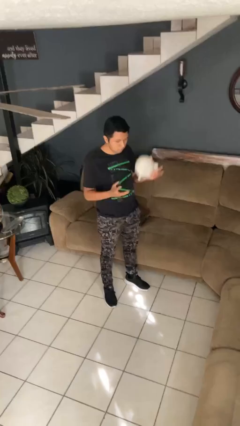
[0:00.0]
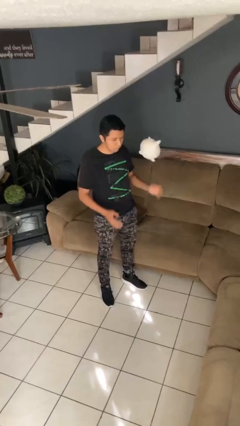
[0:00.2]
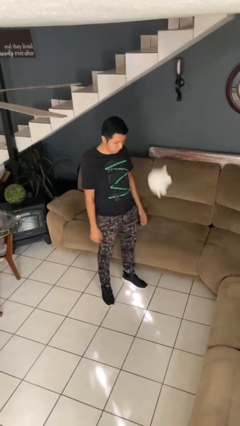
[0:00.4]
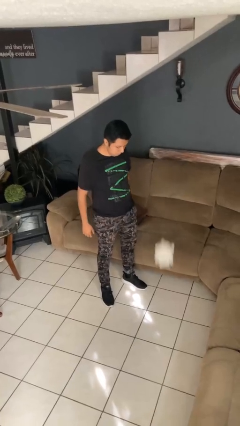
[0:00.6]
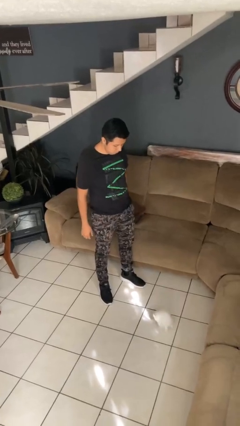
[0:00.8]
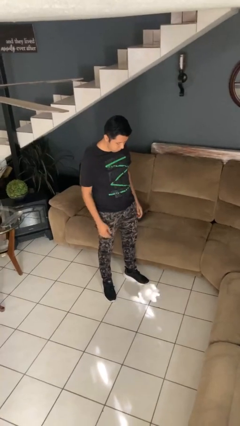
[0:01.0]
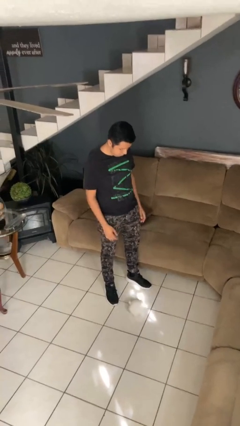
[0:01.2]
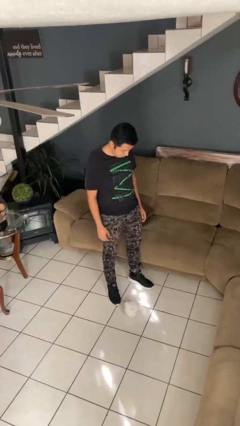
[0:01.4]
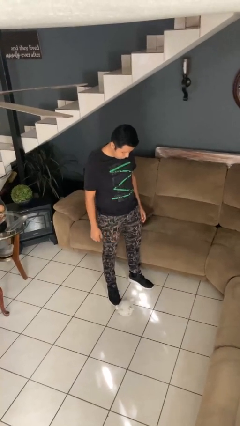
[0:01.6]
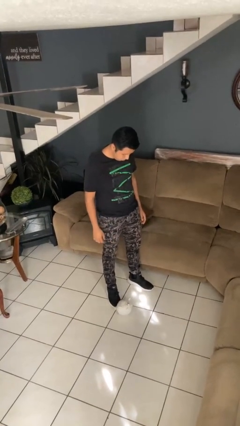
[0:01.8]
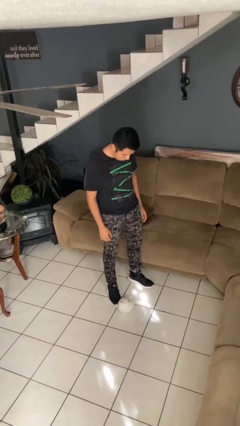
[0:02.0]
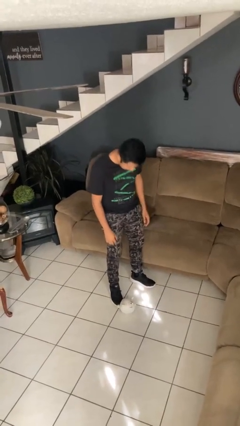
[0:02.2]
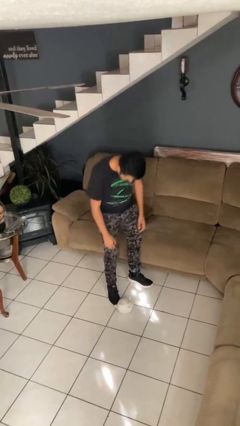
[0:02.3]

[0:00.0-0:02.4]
person throws object into air

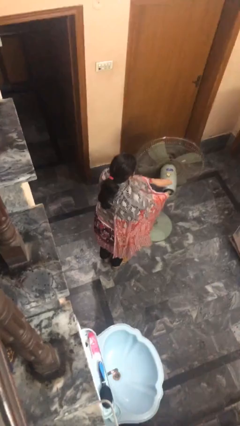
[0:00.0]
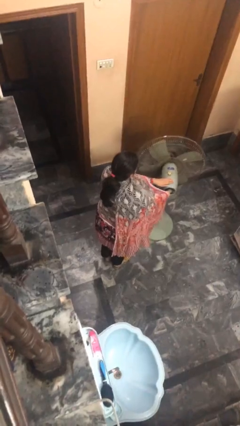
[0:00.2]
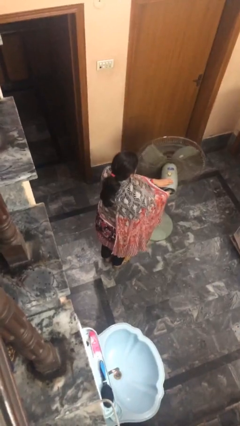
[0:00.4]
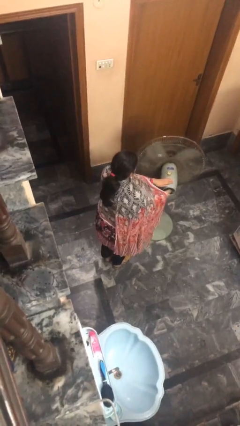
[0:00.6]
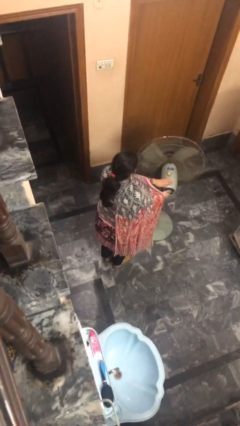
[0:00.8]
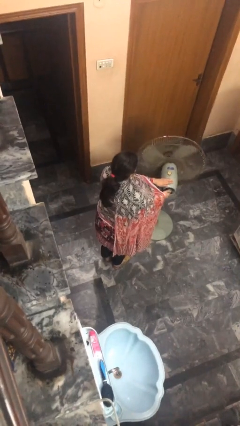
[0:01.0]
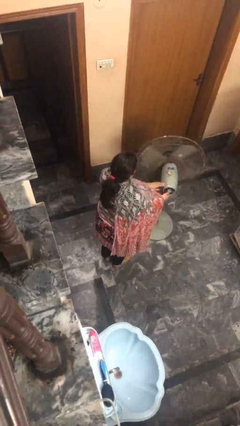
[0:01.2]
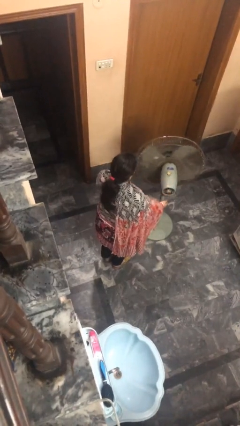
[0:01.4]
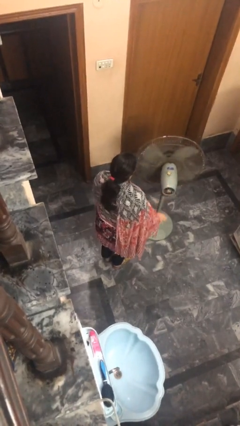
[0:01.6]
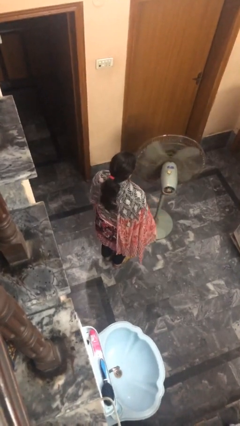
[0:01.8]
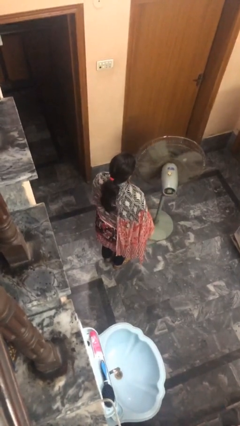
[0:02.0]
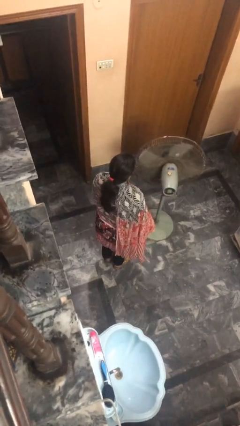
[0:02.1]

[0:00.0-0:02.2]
person turns on fan

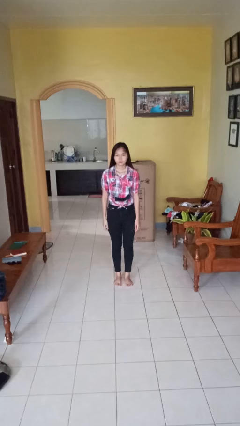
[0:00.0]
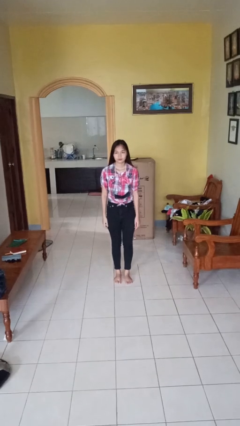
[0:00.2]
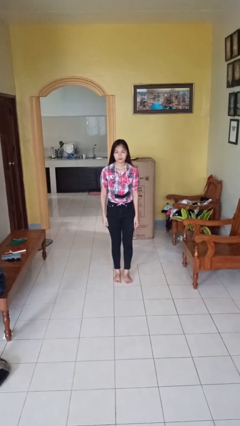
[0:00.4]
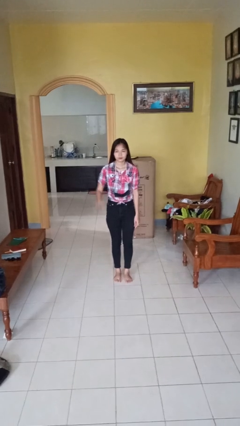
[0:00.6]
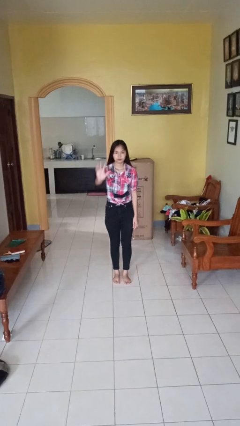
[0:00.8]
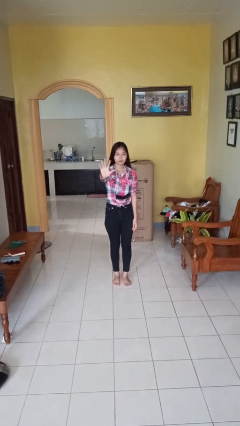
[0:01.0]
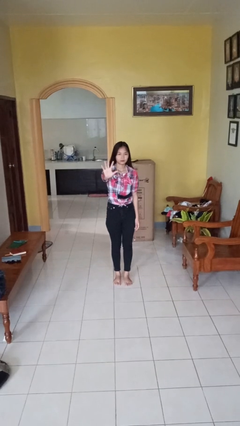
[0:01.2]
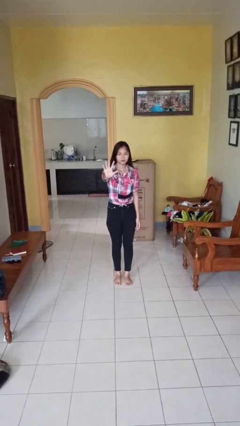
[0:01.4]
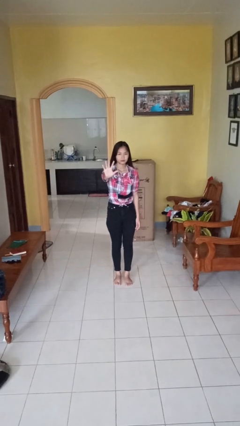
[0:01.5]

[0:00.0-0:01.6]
person gestures number five

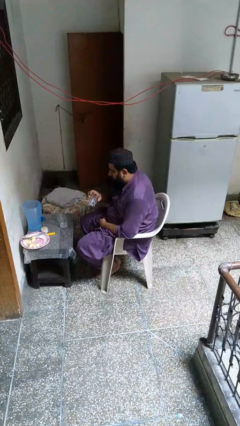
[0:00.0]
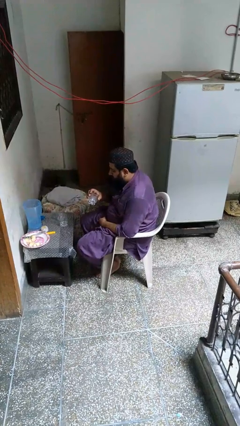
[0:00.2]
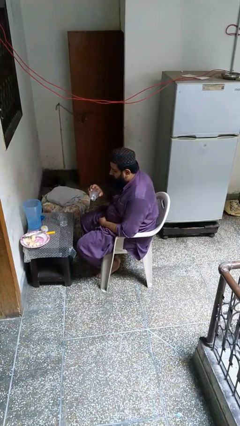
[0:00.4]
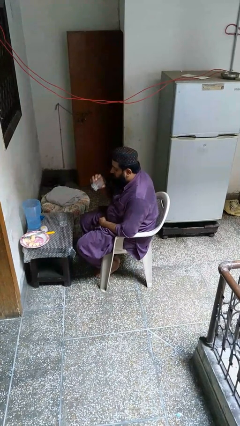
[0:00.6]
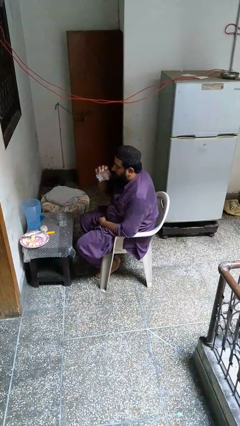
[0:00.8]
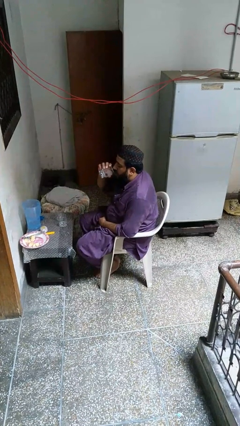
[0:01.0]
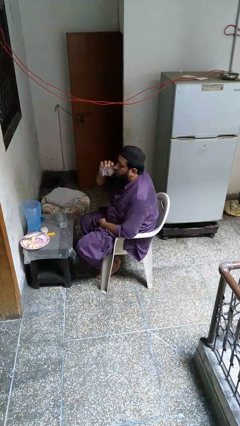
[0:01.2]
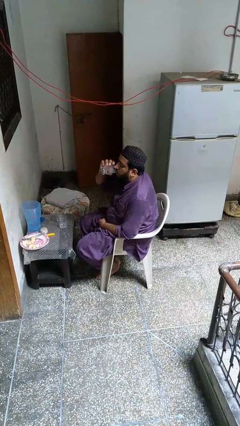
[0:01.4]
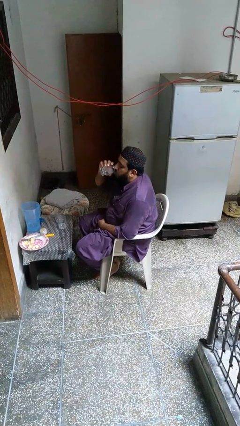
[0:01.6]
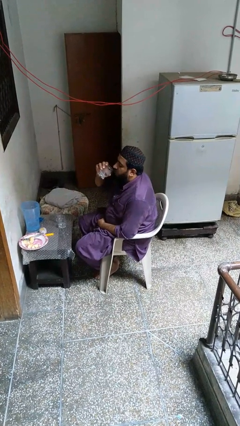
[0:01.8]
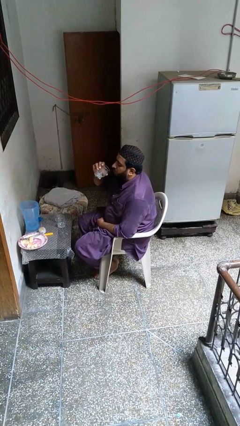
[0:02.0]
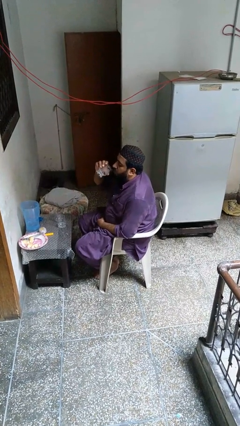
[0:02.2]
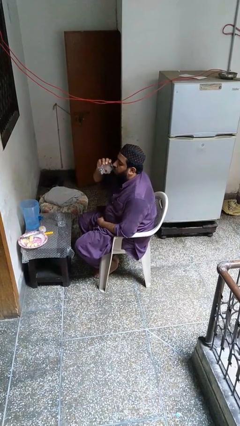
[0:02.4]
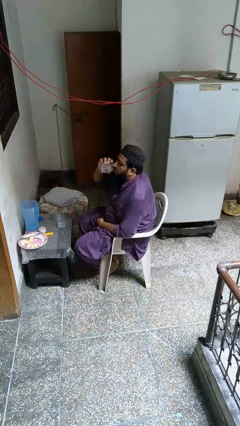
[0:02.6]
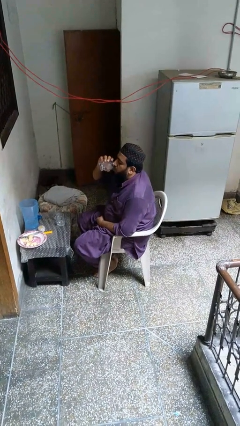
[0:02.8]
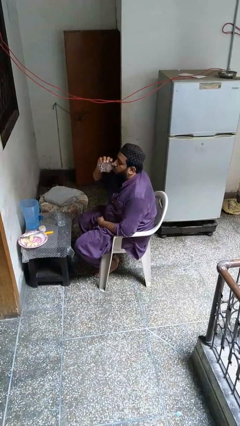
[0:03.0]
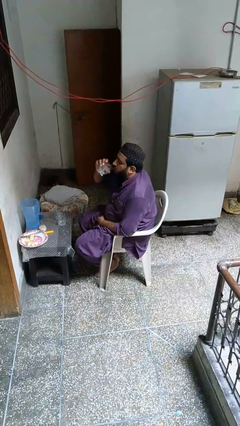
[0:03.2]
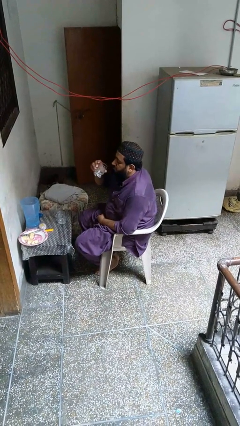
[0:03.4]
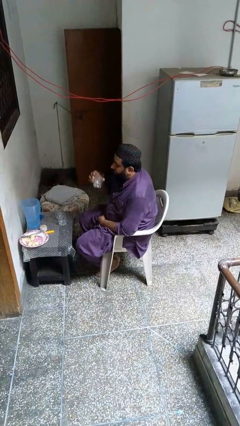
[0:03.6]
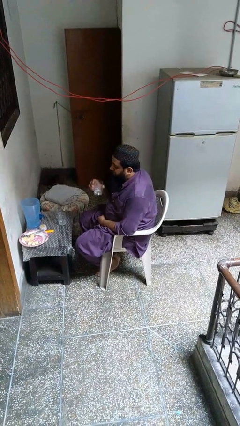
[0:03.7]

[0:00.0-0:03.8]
person drinks from shotglass

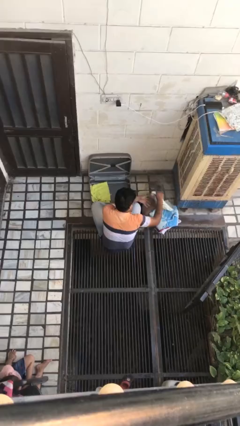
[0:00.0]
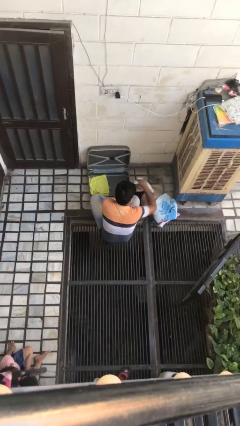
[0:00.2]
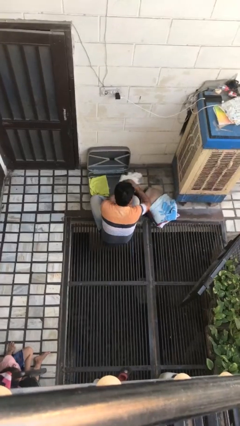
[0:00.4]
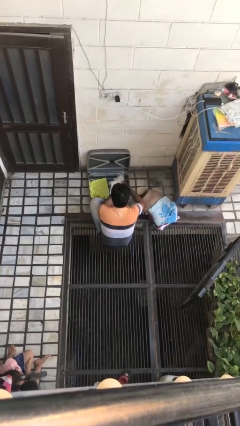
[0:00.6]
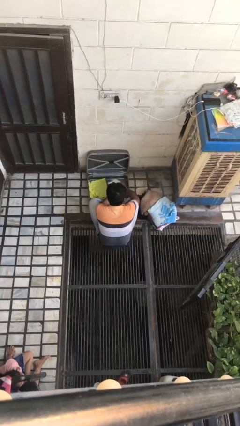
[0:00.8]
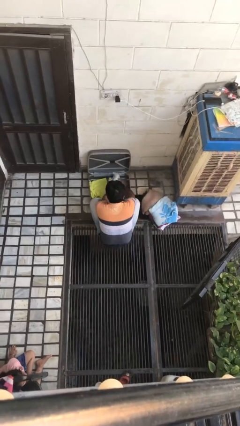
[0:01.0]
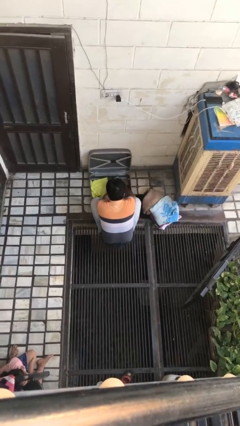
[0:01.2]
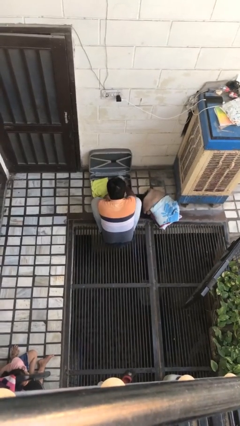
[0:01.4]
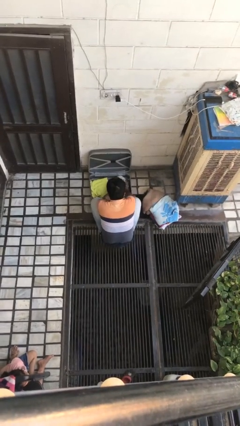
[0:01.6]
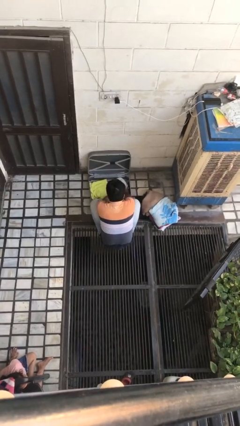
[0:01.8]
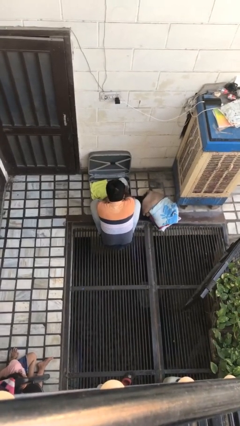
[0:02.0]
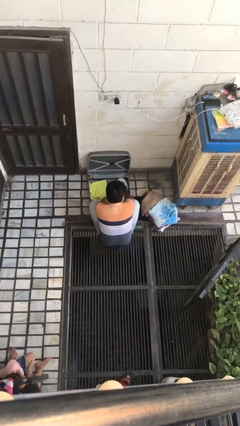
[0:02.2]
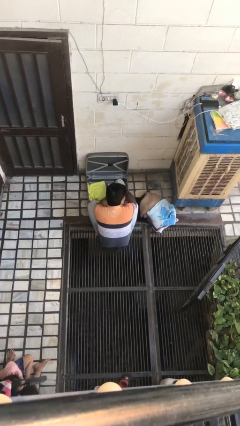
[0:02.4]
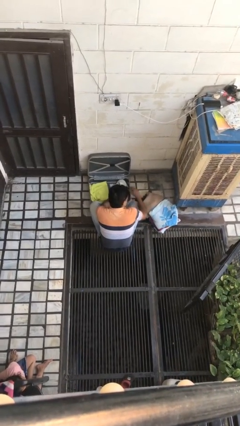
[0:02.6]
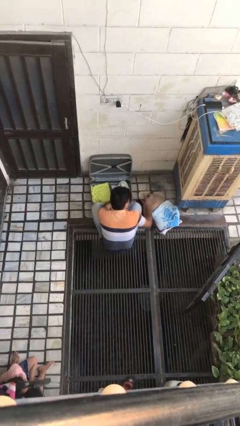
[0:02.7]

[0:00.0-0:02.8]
person loads clothes into suitcase

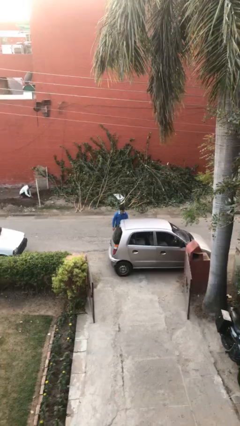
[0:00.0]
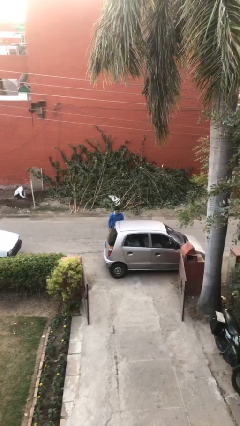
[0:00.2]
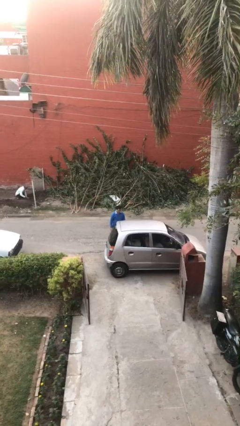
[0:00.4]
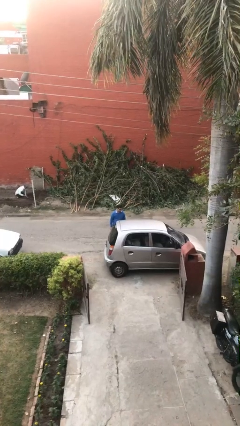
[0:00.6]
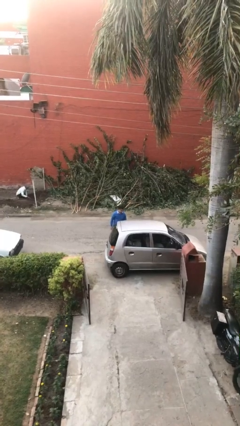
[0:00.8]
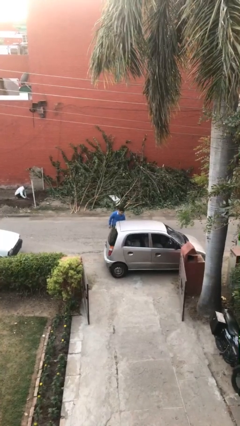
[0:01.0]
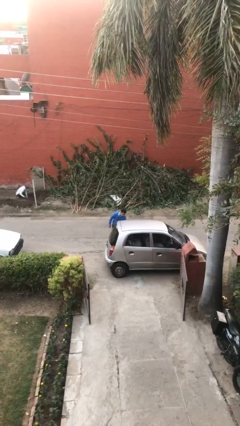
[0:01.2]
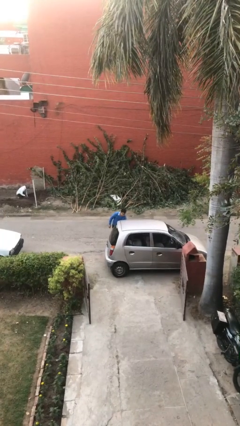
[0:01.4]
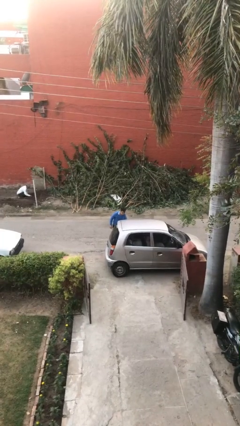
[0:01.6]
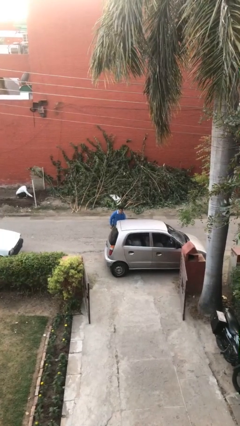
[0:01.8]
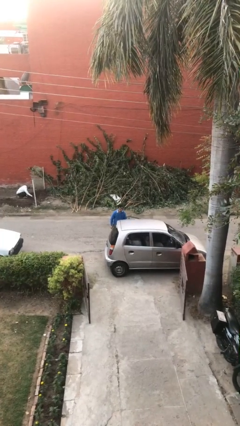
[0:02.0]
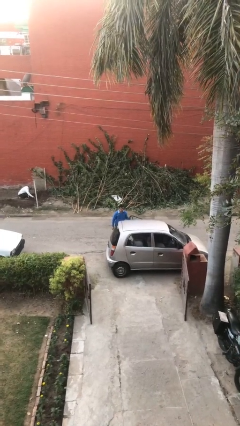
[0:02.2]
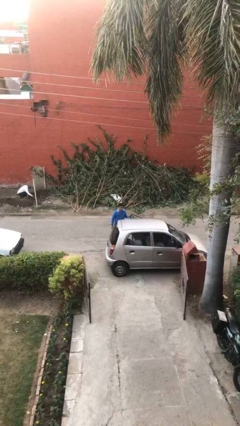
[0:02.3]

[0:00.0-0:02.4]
person opens car door

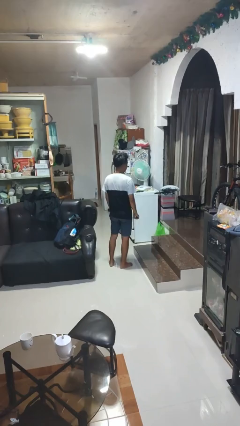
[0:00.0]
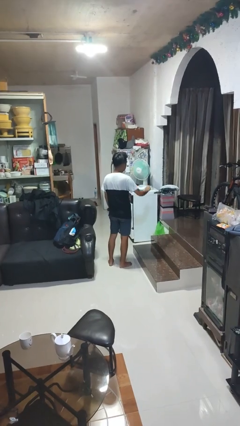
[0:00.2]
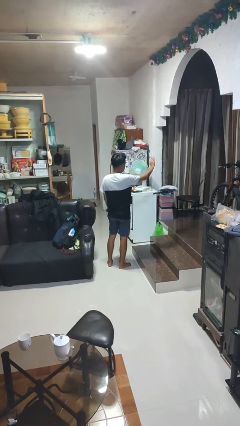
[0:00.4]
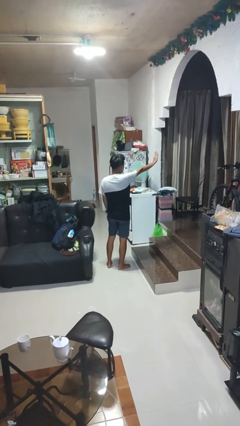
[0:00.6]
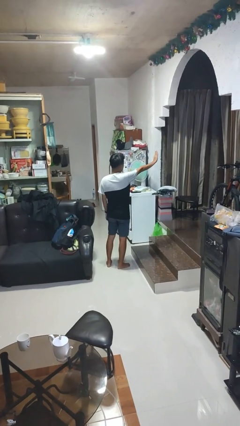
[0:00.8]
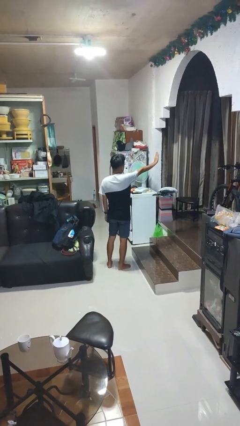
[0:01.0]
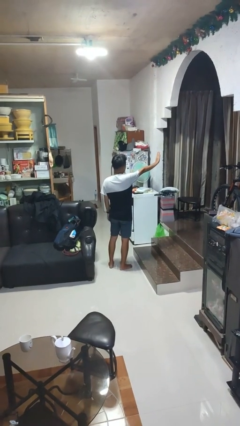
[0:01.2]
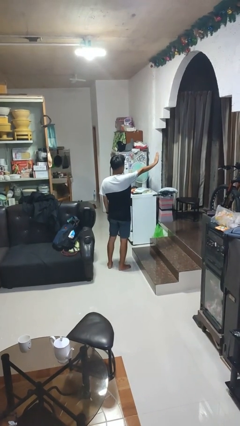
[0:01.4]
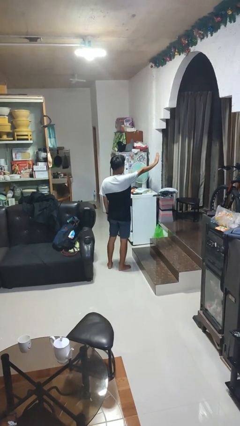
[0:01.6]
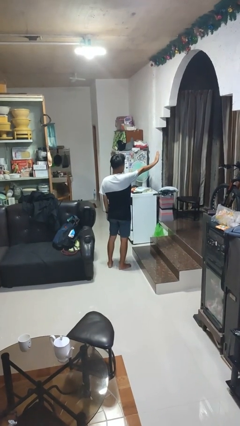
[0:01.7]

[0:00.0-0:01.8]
person gestures stop
